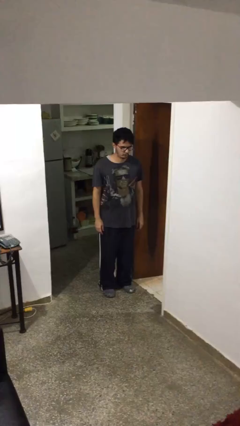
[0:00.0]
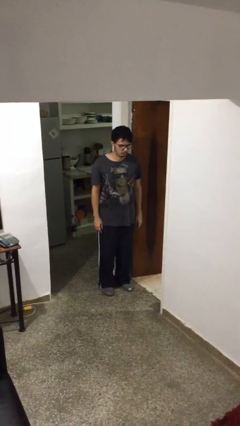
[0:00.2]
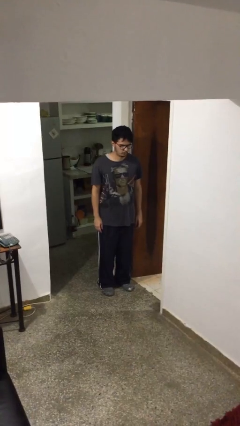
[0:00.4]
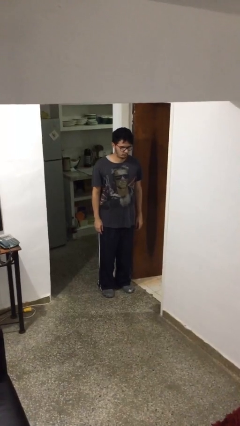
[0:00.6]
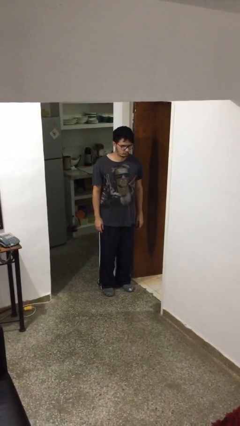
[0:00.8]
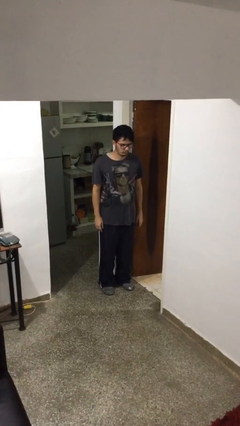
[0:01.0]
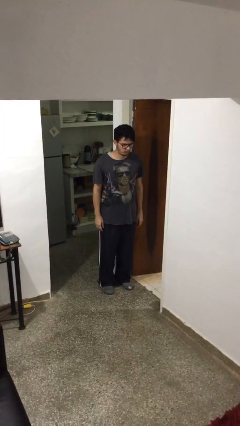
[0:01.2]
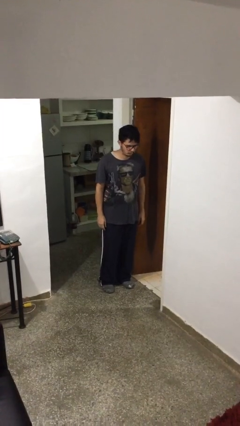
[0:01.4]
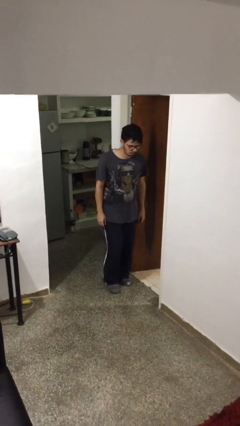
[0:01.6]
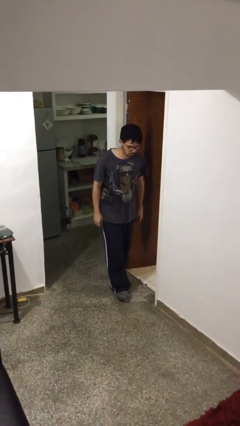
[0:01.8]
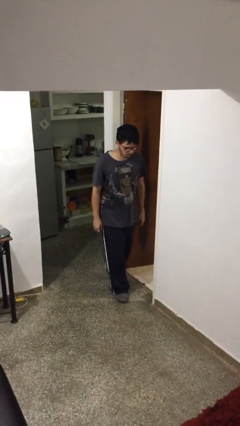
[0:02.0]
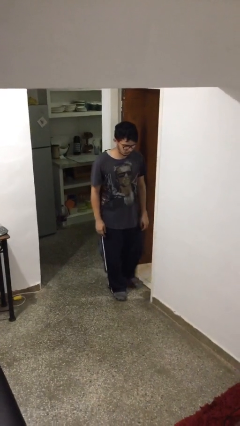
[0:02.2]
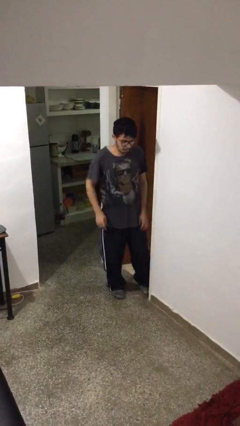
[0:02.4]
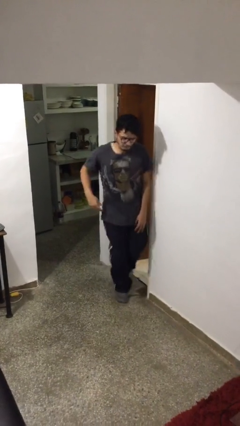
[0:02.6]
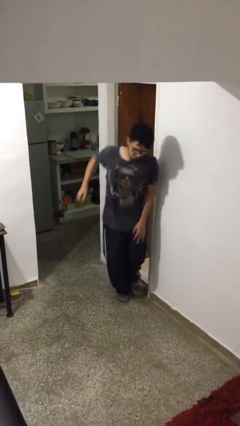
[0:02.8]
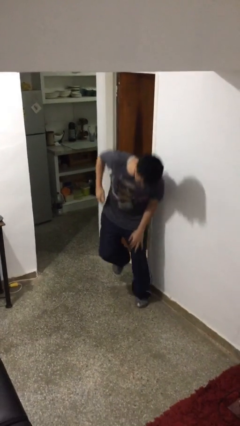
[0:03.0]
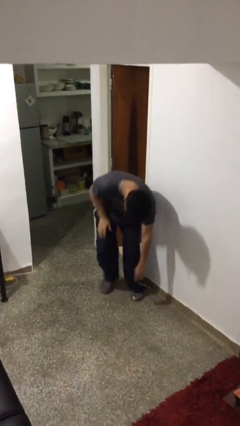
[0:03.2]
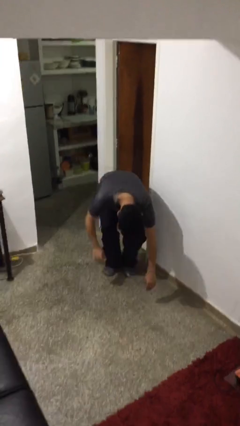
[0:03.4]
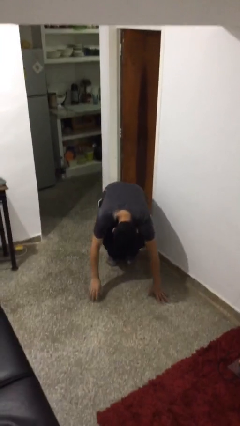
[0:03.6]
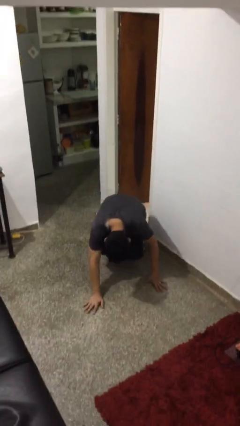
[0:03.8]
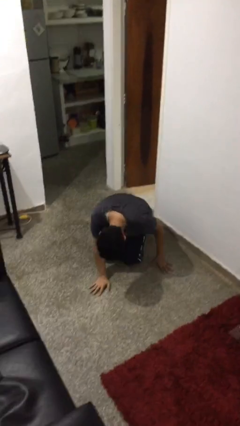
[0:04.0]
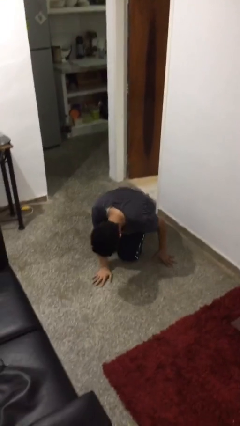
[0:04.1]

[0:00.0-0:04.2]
person trips on object on floor

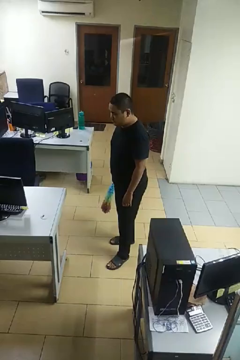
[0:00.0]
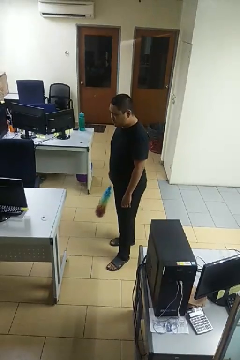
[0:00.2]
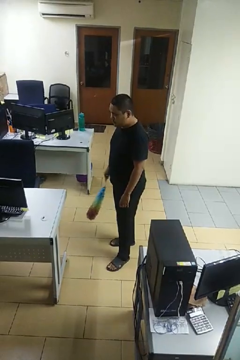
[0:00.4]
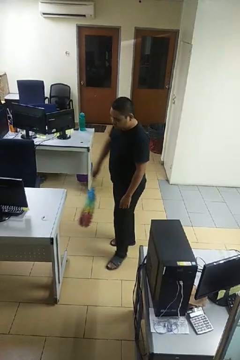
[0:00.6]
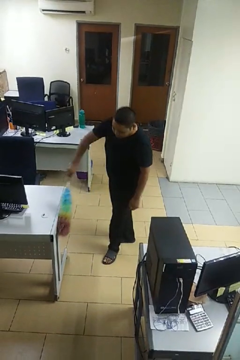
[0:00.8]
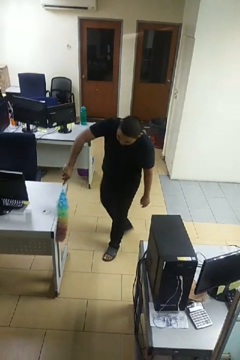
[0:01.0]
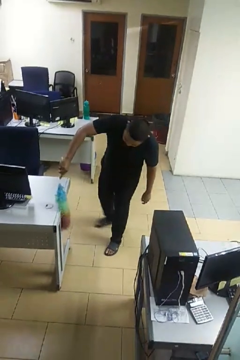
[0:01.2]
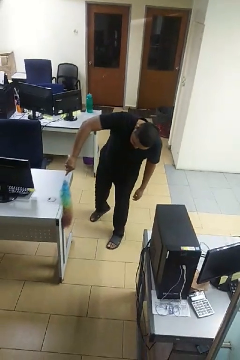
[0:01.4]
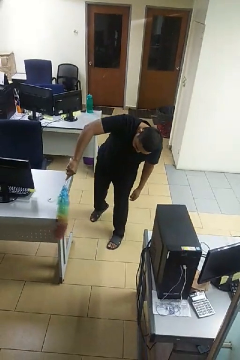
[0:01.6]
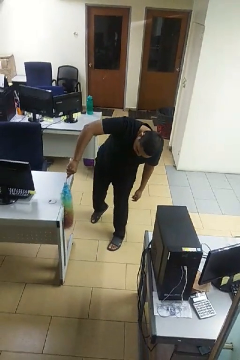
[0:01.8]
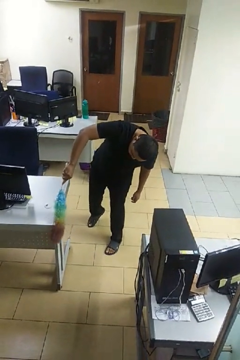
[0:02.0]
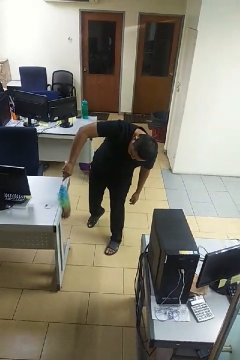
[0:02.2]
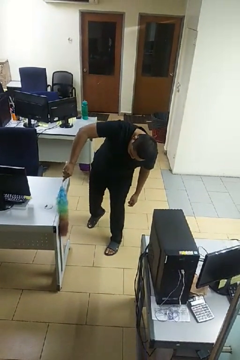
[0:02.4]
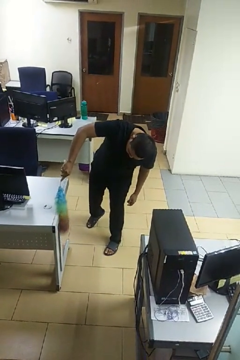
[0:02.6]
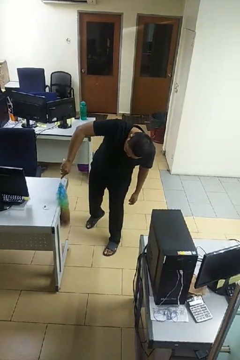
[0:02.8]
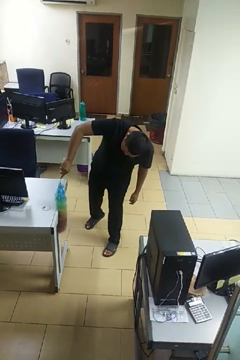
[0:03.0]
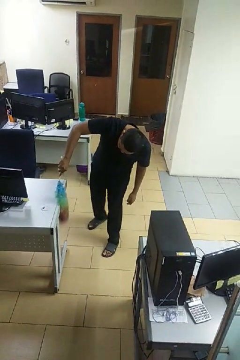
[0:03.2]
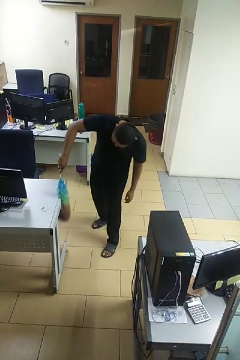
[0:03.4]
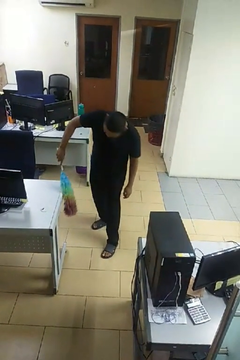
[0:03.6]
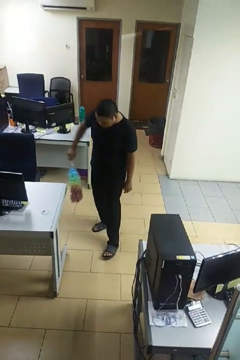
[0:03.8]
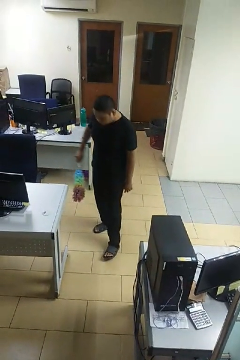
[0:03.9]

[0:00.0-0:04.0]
person dusts furniture

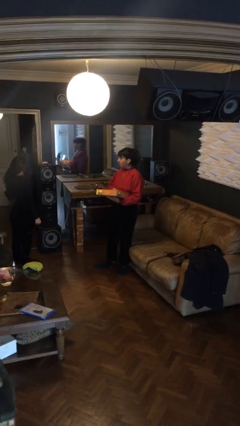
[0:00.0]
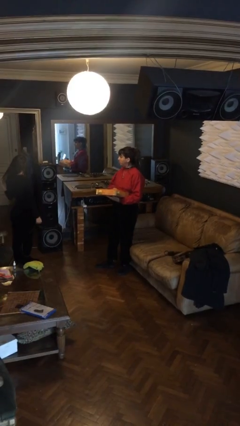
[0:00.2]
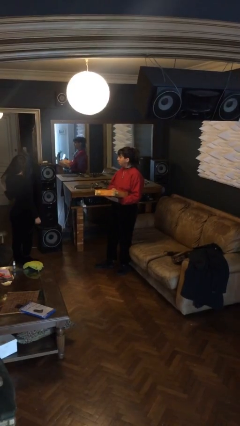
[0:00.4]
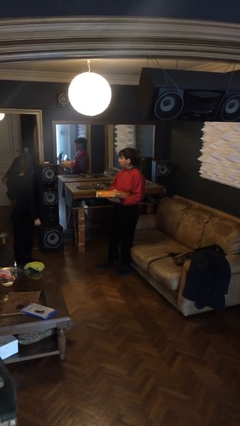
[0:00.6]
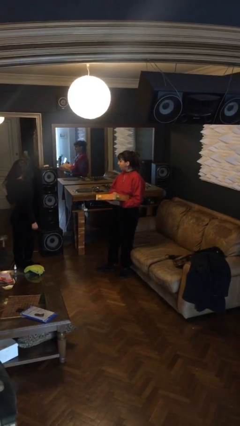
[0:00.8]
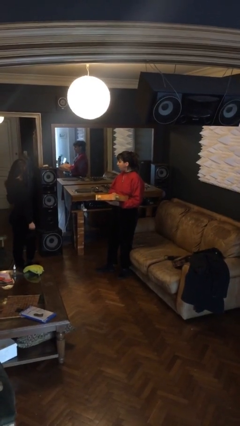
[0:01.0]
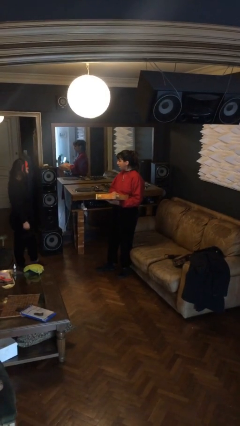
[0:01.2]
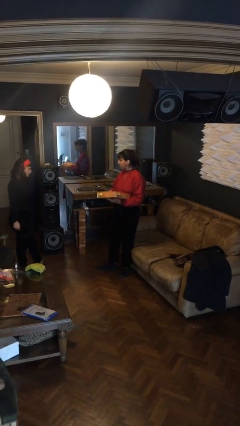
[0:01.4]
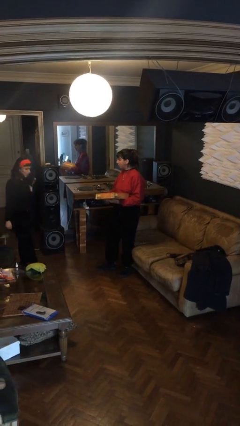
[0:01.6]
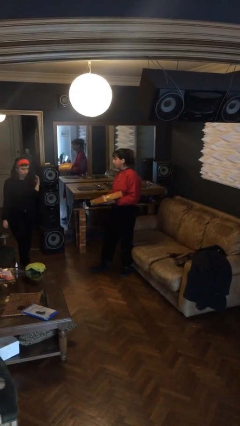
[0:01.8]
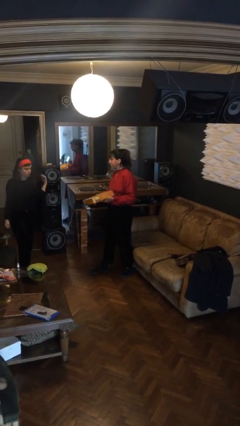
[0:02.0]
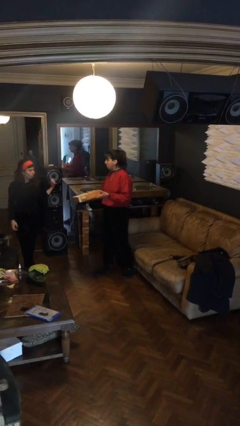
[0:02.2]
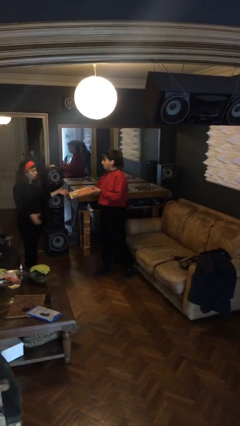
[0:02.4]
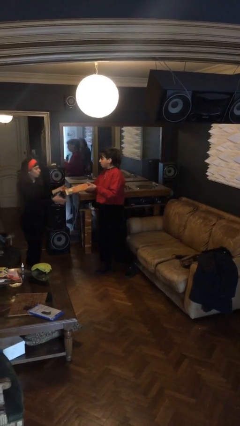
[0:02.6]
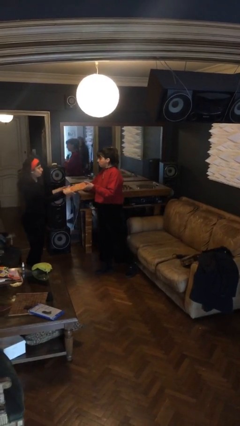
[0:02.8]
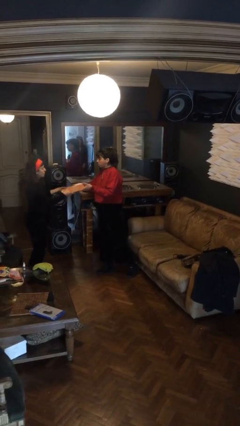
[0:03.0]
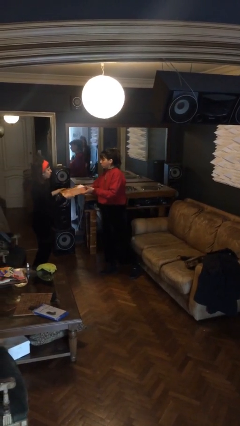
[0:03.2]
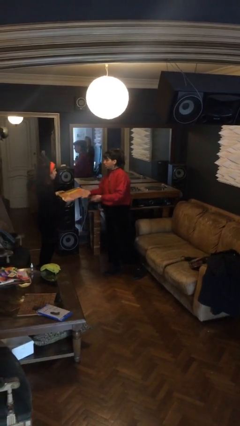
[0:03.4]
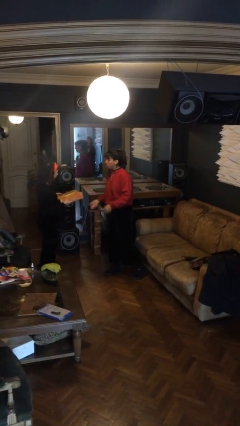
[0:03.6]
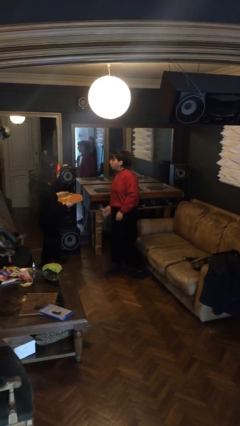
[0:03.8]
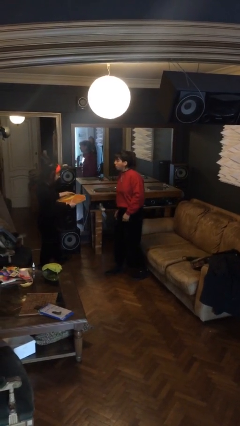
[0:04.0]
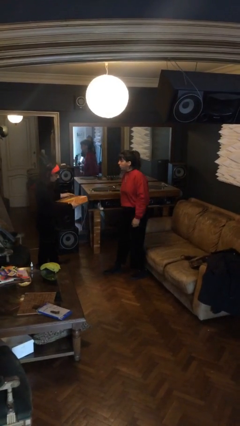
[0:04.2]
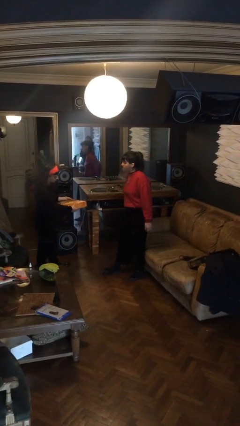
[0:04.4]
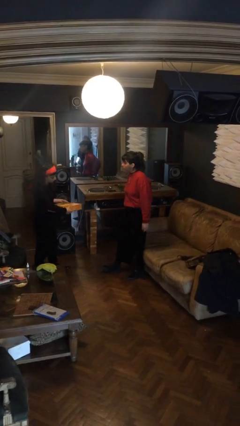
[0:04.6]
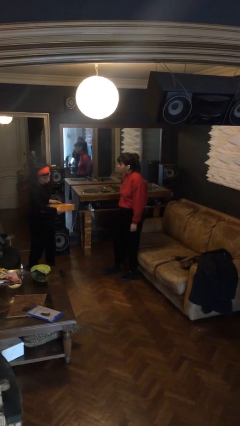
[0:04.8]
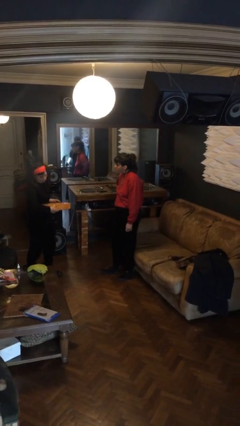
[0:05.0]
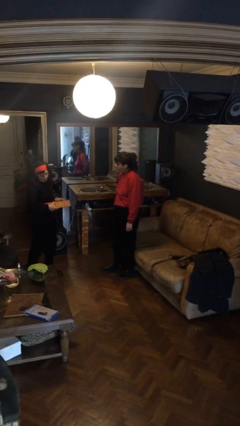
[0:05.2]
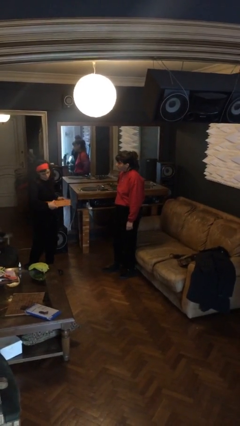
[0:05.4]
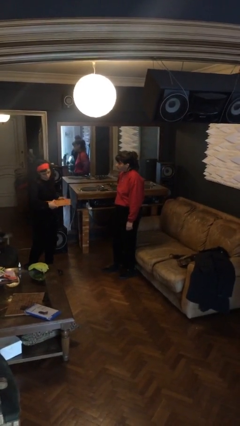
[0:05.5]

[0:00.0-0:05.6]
person transfers object to person

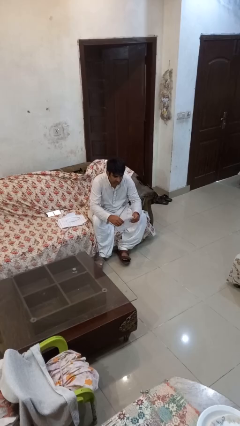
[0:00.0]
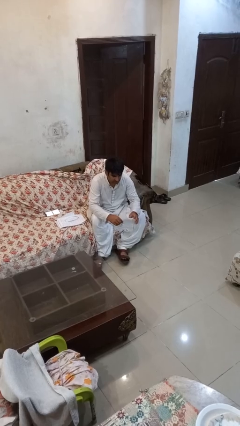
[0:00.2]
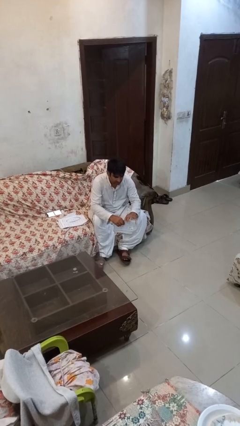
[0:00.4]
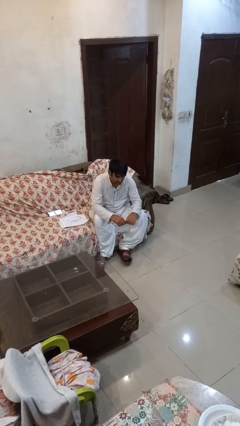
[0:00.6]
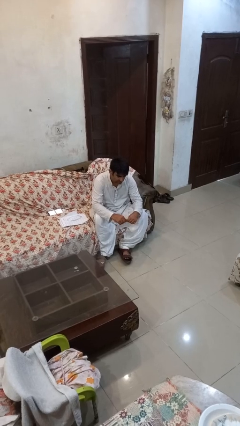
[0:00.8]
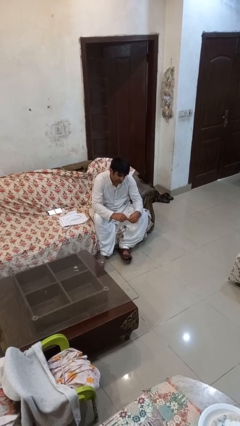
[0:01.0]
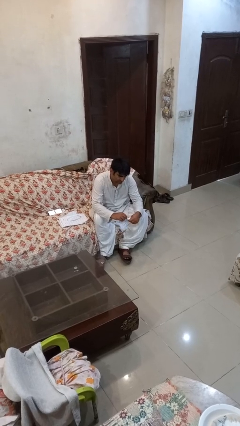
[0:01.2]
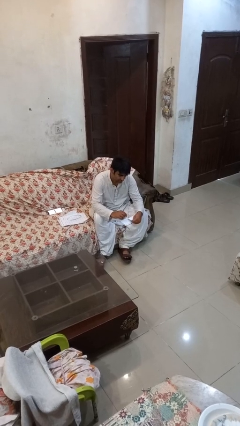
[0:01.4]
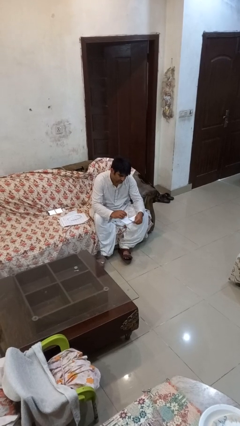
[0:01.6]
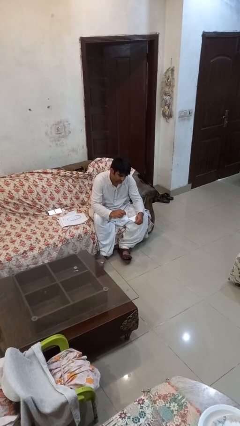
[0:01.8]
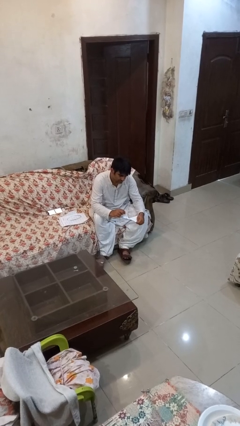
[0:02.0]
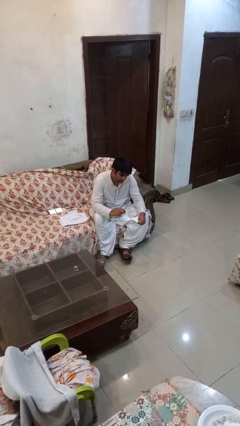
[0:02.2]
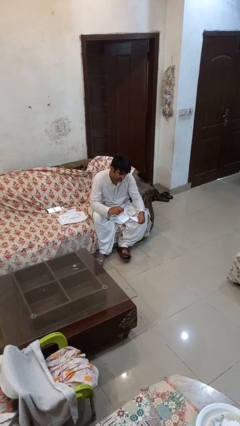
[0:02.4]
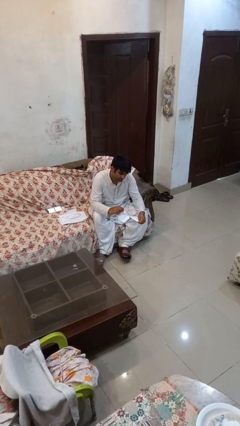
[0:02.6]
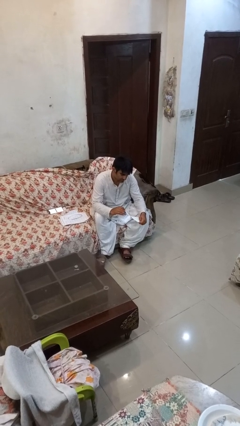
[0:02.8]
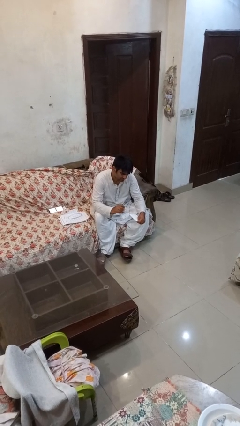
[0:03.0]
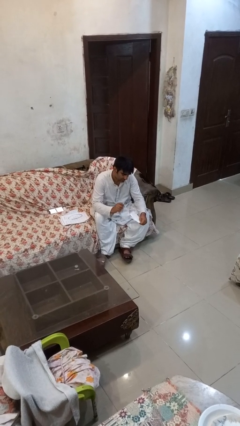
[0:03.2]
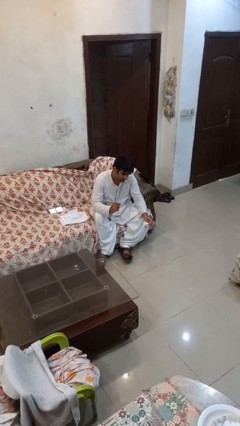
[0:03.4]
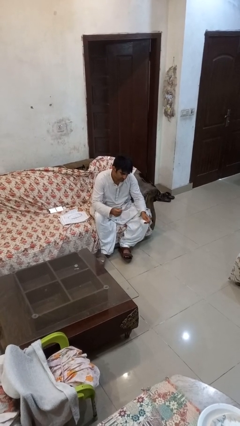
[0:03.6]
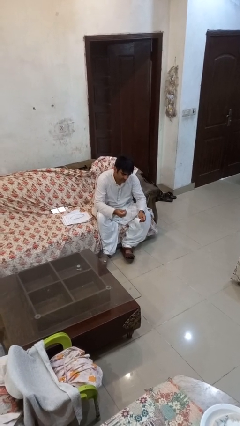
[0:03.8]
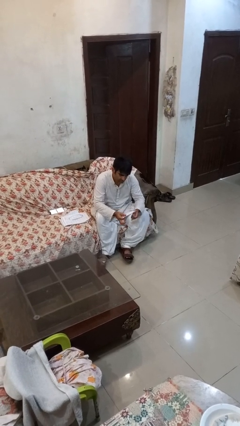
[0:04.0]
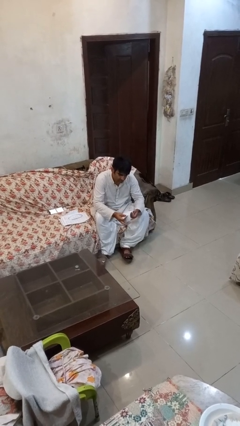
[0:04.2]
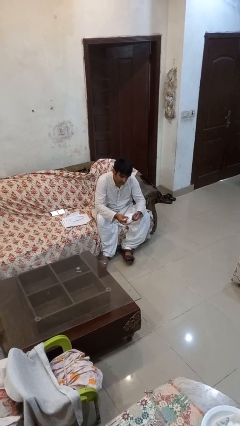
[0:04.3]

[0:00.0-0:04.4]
person tears paper

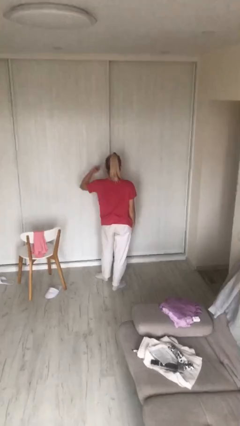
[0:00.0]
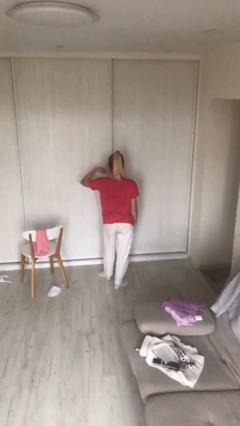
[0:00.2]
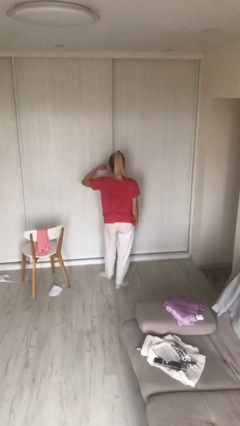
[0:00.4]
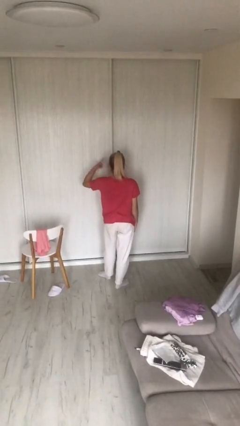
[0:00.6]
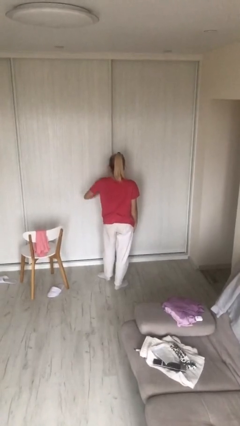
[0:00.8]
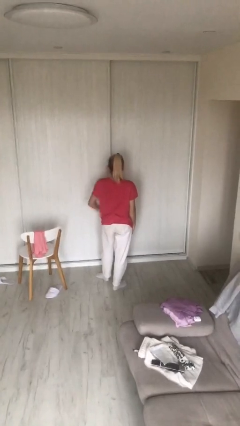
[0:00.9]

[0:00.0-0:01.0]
person gestures listen closely
